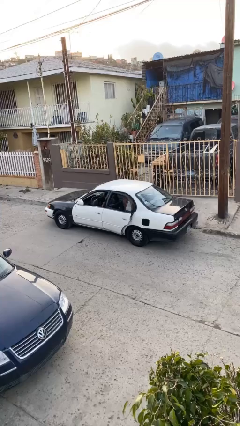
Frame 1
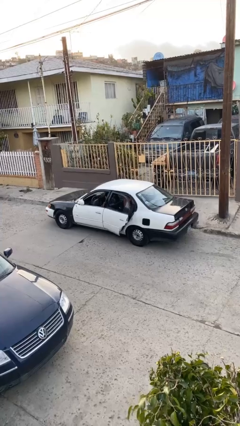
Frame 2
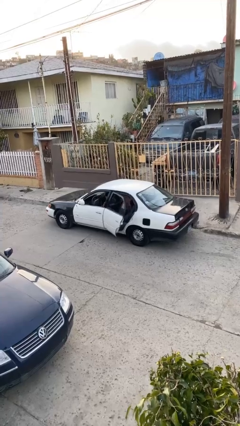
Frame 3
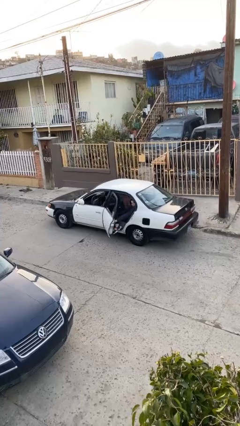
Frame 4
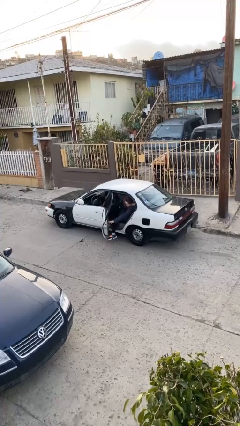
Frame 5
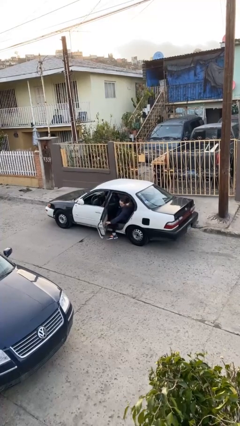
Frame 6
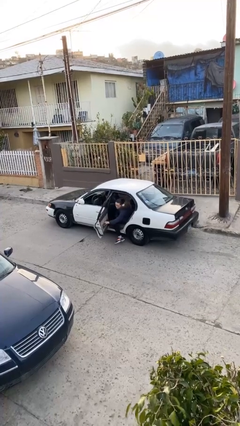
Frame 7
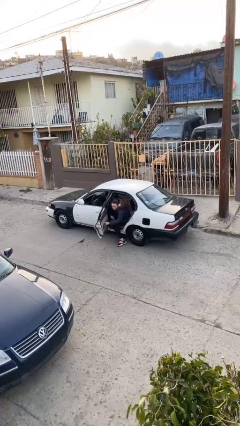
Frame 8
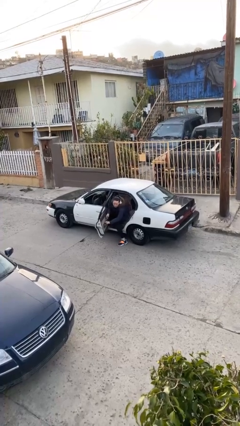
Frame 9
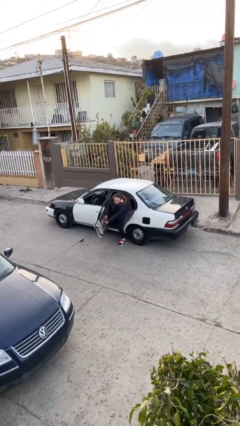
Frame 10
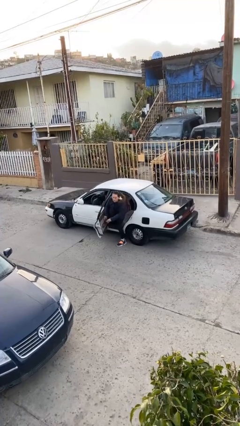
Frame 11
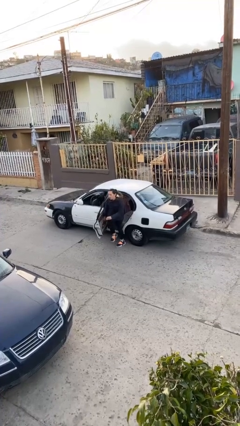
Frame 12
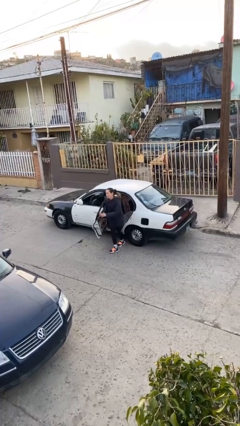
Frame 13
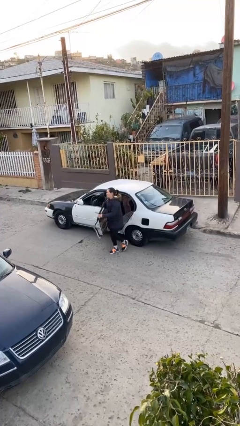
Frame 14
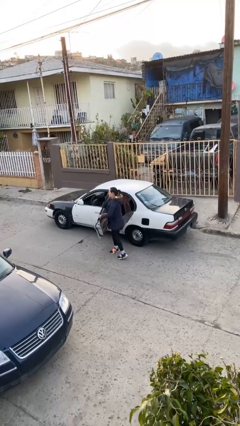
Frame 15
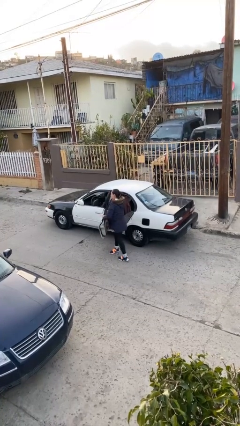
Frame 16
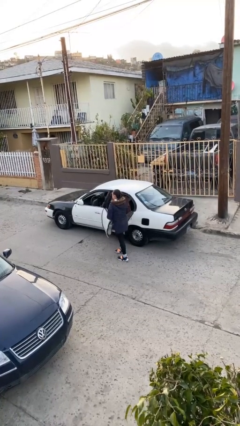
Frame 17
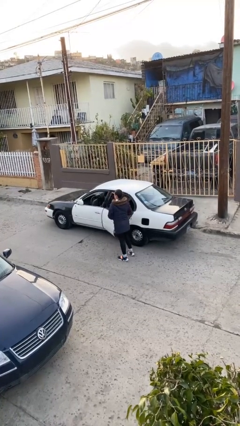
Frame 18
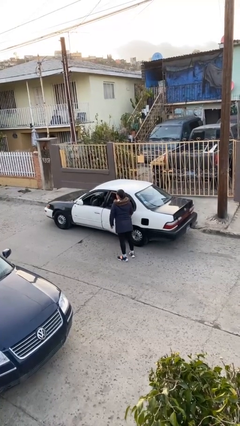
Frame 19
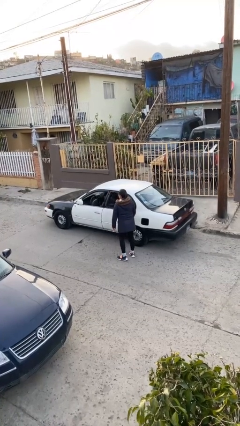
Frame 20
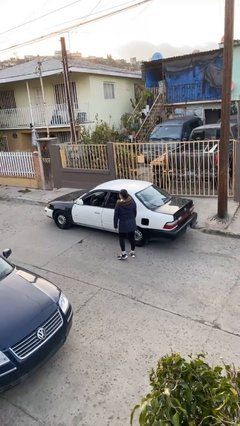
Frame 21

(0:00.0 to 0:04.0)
car drops off person

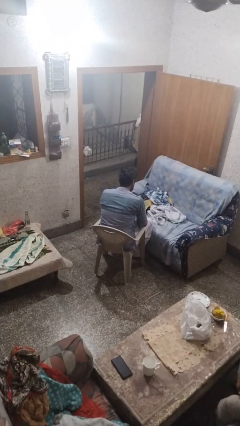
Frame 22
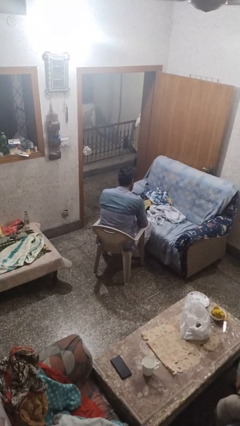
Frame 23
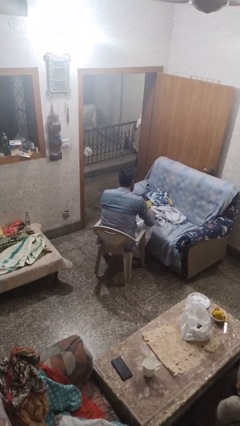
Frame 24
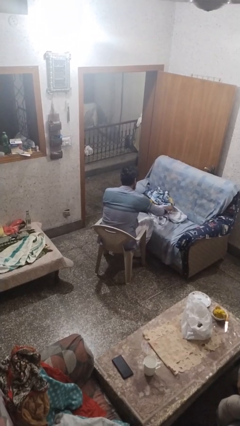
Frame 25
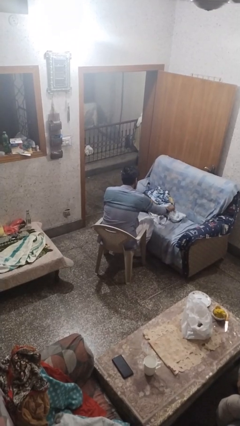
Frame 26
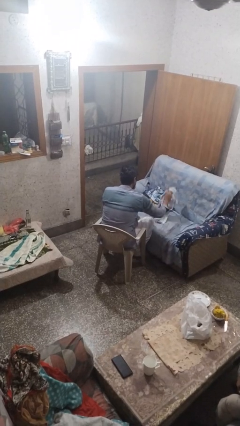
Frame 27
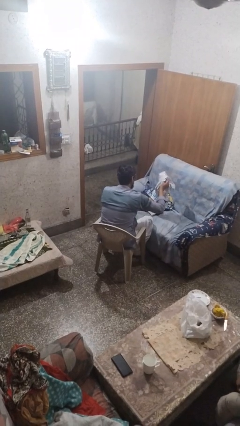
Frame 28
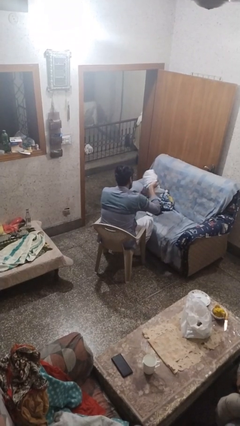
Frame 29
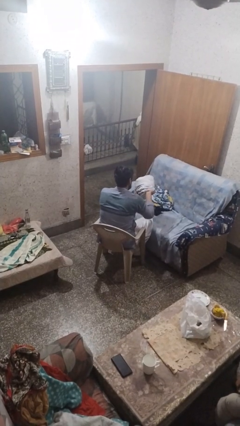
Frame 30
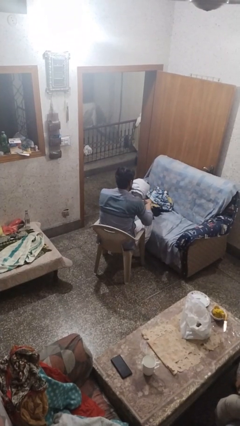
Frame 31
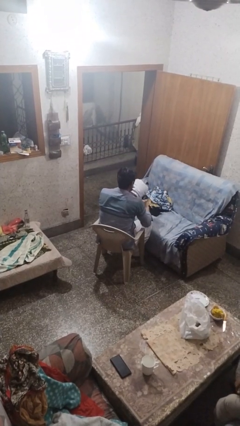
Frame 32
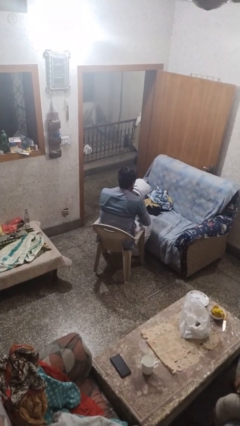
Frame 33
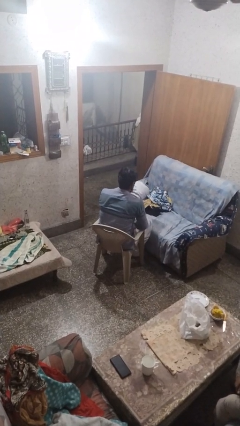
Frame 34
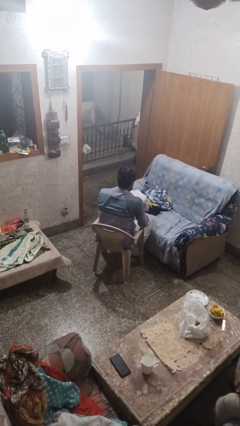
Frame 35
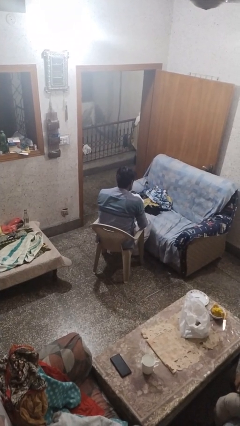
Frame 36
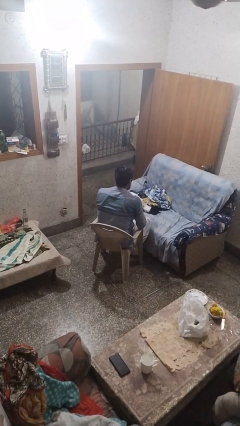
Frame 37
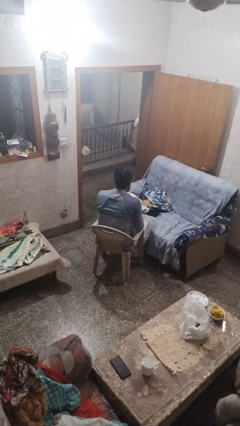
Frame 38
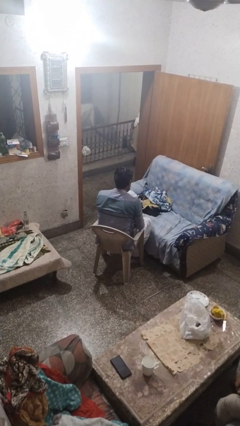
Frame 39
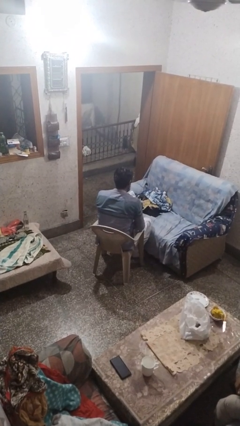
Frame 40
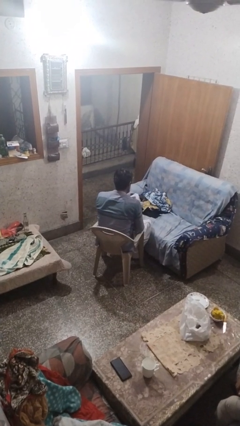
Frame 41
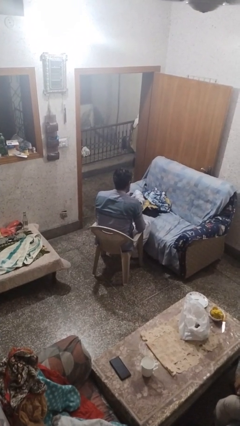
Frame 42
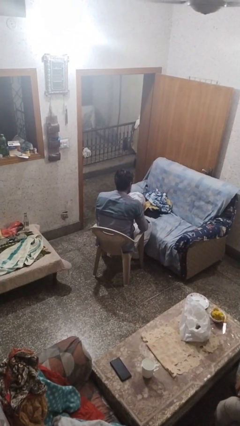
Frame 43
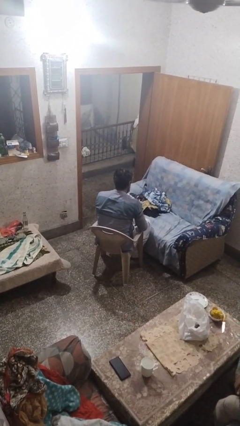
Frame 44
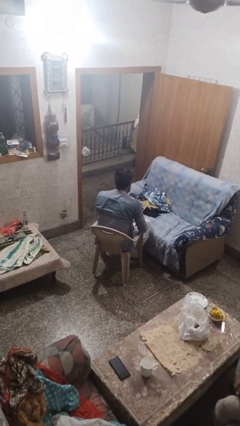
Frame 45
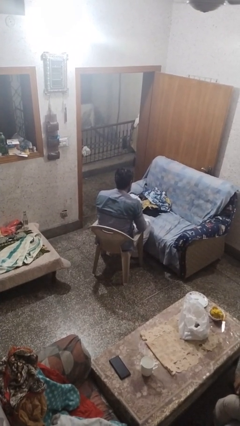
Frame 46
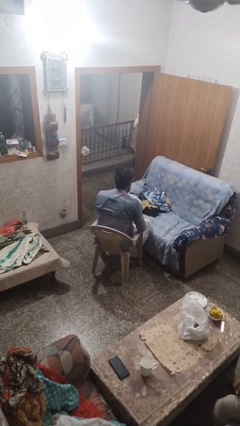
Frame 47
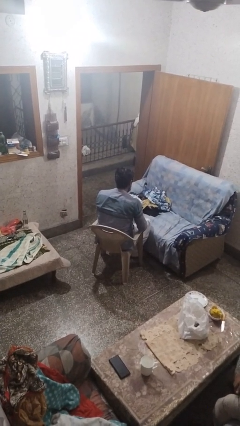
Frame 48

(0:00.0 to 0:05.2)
person folds shirt

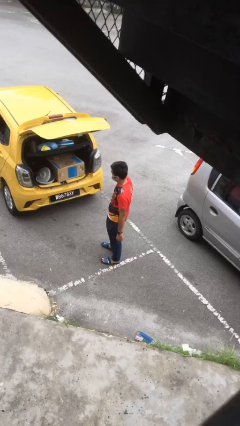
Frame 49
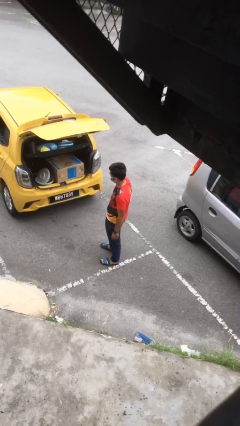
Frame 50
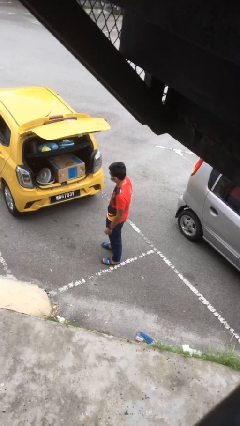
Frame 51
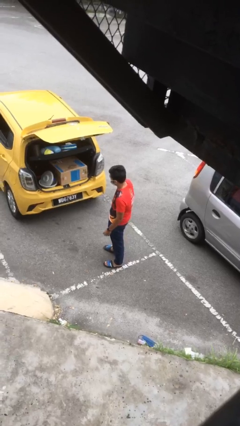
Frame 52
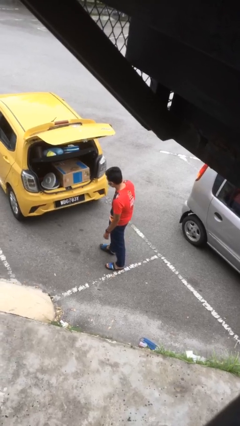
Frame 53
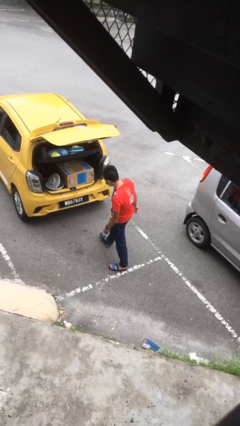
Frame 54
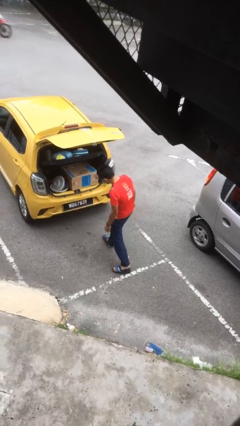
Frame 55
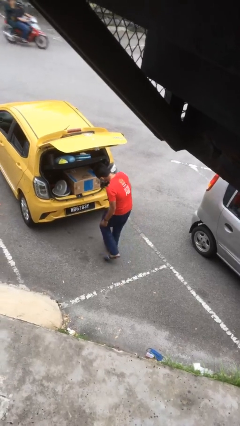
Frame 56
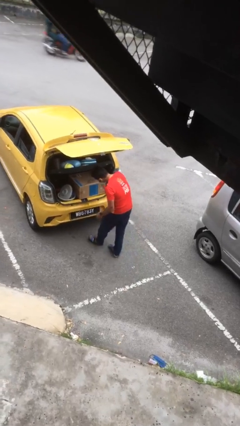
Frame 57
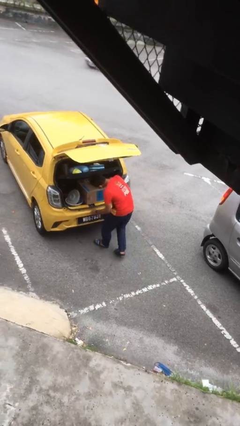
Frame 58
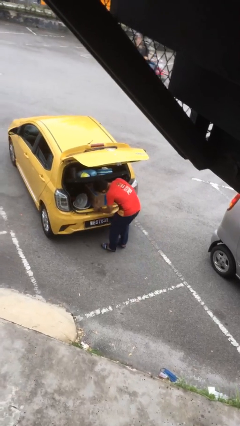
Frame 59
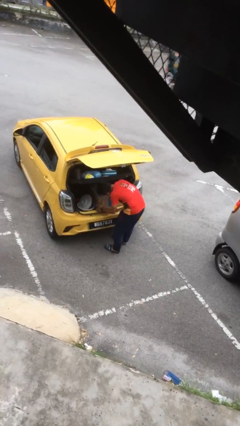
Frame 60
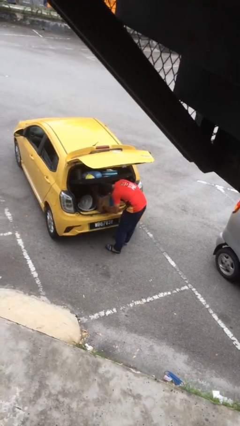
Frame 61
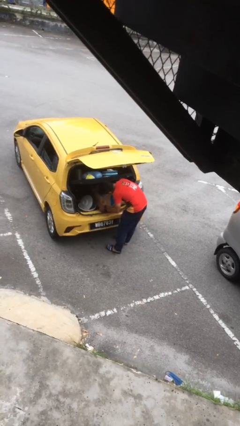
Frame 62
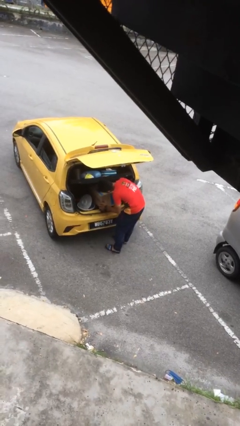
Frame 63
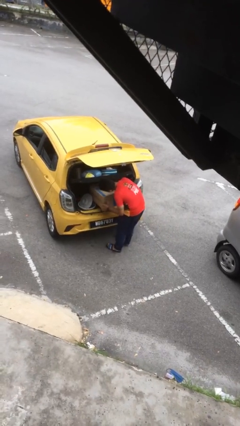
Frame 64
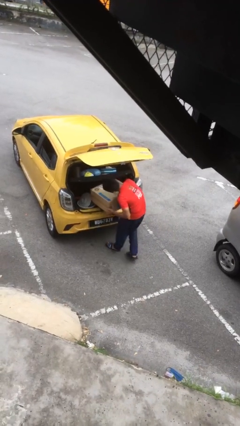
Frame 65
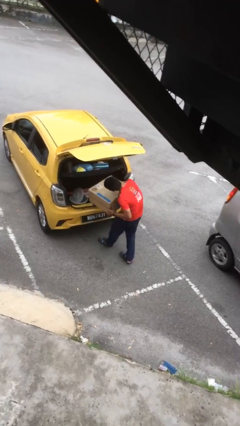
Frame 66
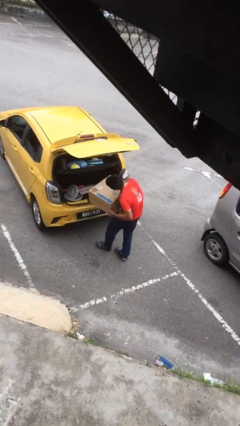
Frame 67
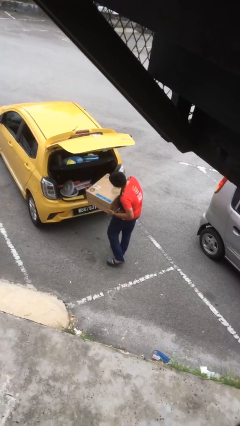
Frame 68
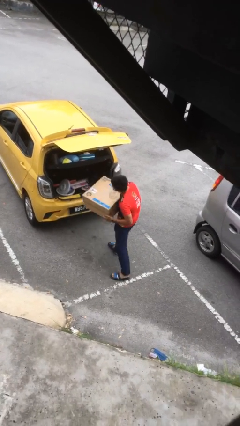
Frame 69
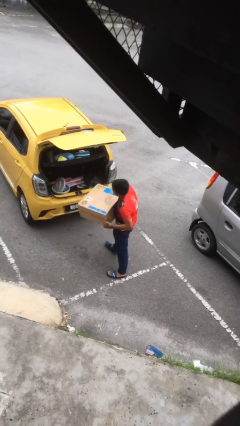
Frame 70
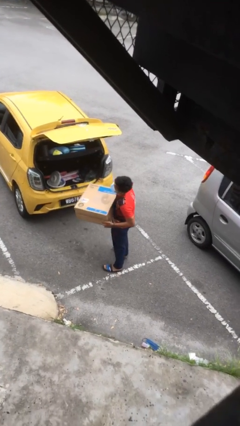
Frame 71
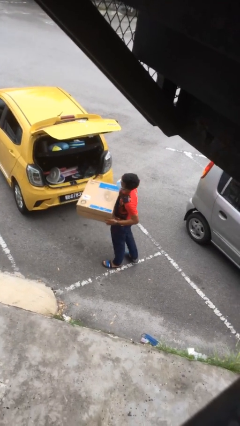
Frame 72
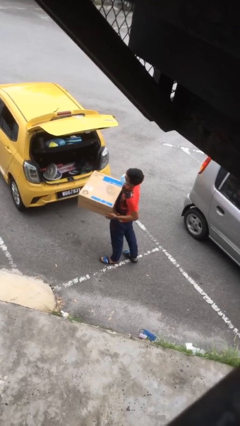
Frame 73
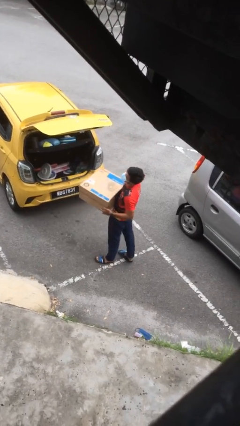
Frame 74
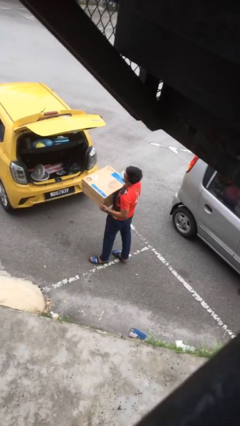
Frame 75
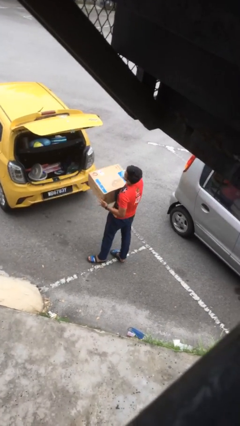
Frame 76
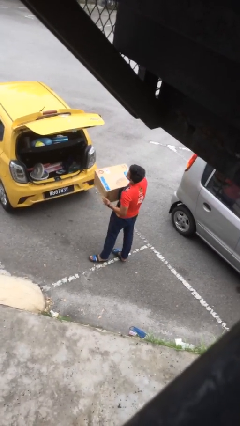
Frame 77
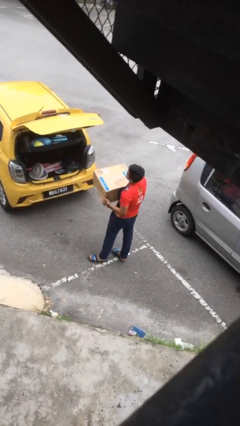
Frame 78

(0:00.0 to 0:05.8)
person unloads car

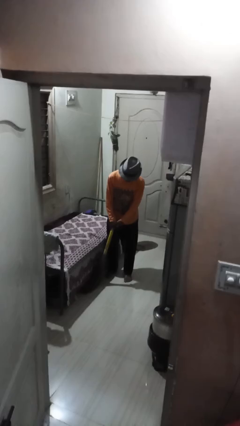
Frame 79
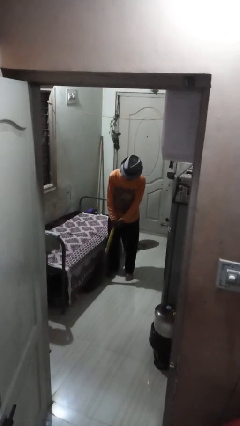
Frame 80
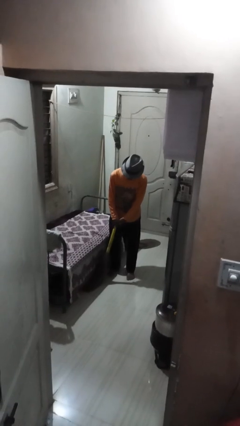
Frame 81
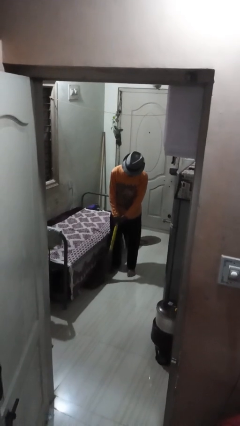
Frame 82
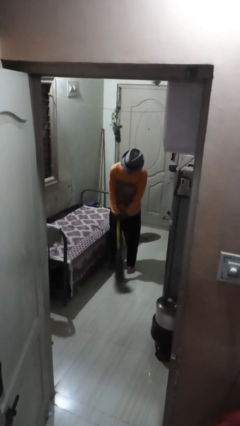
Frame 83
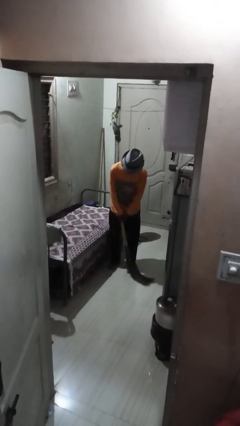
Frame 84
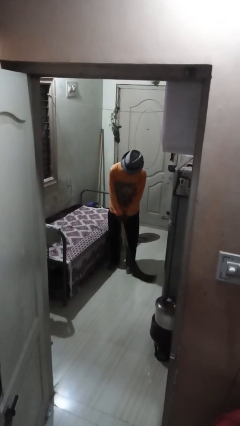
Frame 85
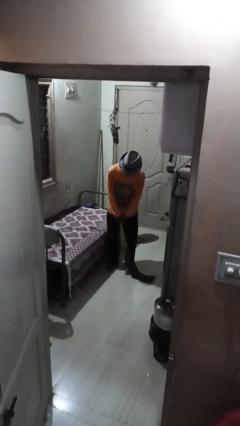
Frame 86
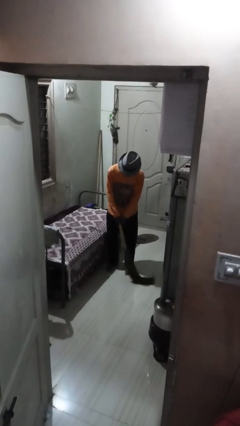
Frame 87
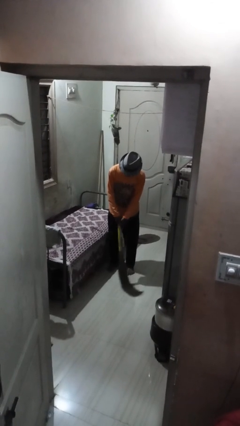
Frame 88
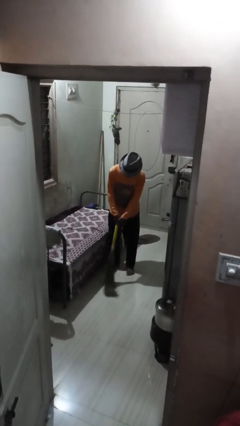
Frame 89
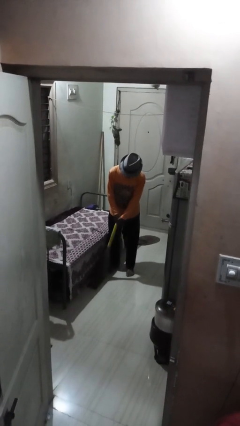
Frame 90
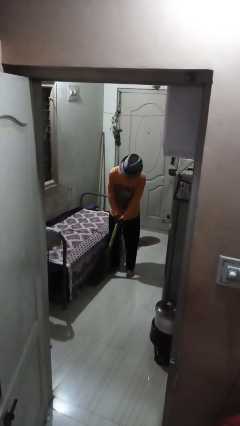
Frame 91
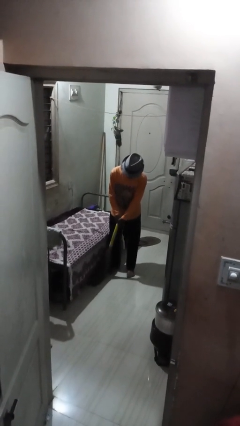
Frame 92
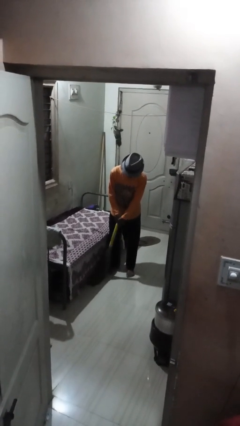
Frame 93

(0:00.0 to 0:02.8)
person sweeps floor

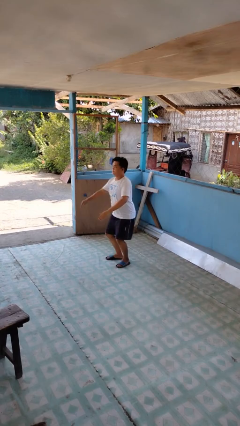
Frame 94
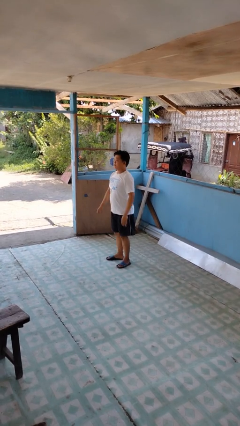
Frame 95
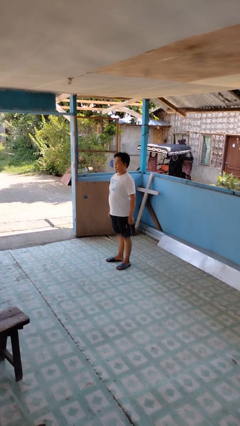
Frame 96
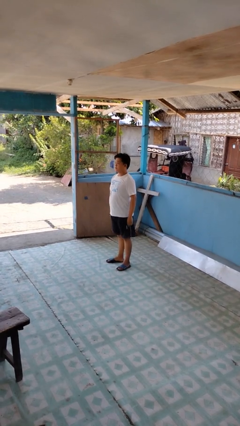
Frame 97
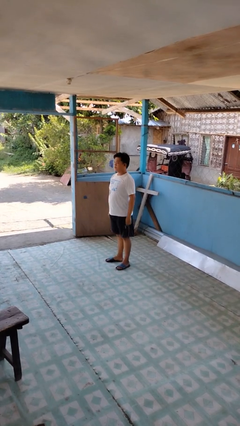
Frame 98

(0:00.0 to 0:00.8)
person stands up
